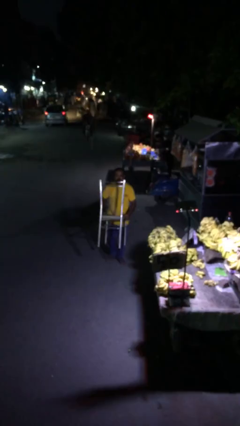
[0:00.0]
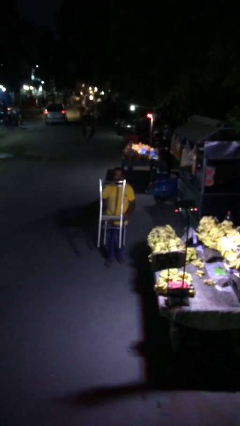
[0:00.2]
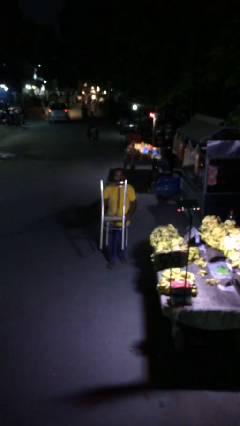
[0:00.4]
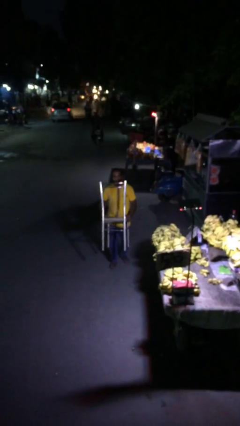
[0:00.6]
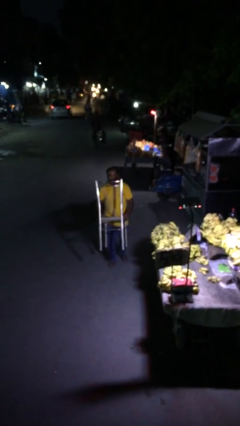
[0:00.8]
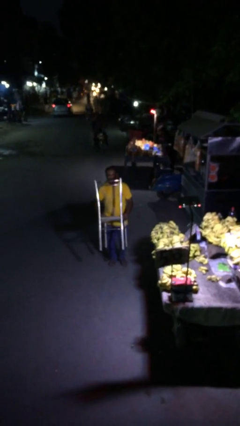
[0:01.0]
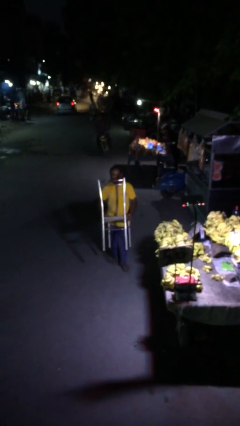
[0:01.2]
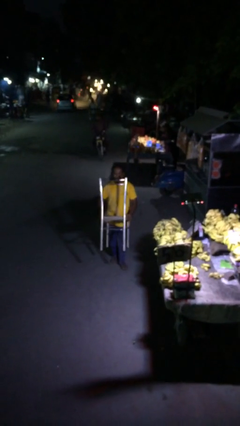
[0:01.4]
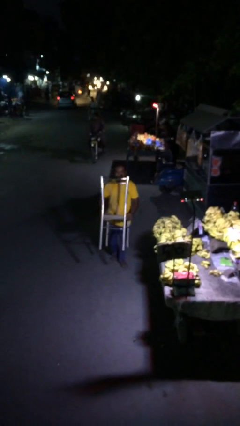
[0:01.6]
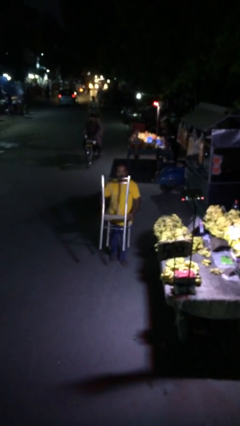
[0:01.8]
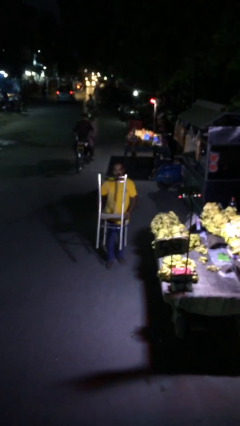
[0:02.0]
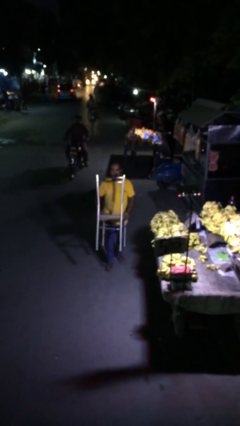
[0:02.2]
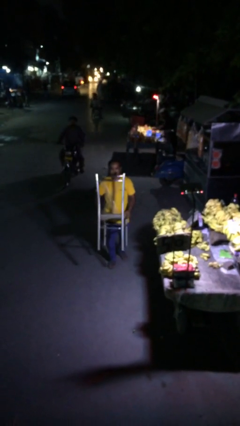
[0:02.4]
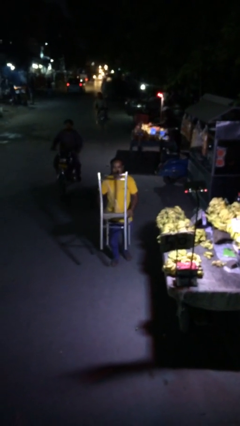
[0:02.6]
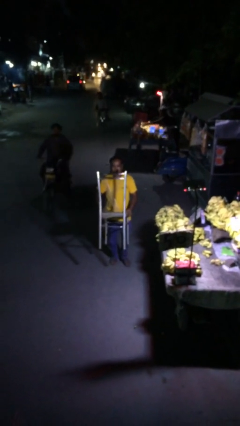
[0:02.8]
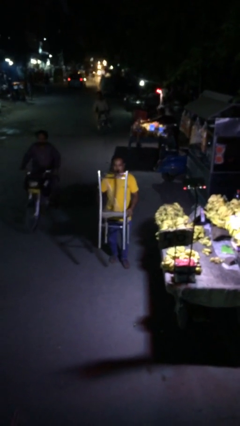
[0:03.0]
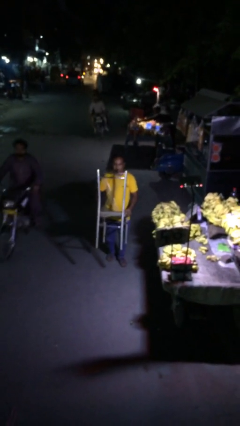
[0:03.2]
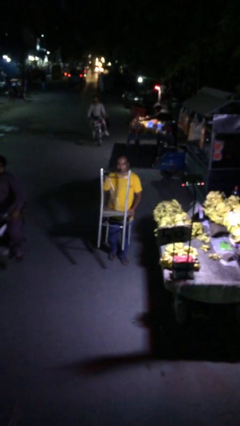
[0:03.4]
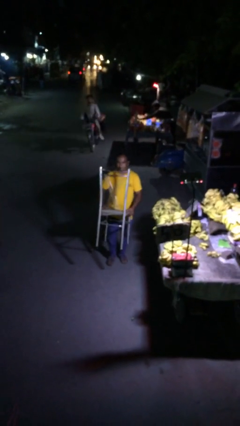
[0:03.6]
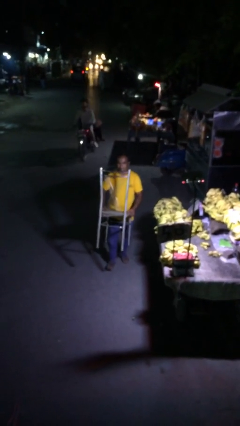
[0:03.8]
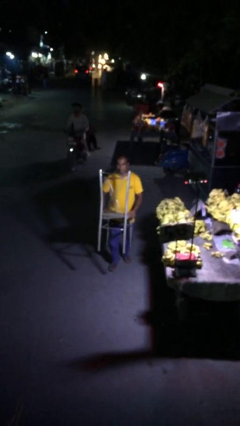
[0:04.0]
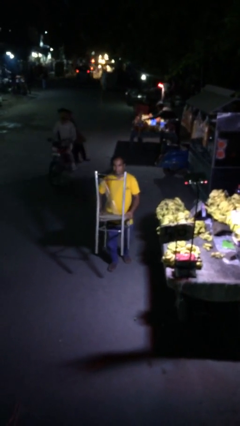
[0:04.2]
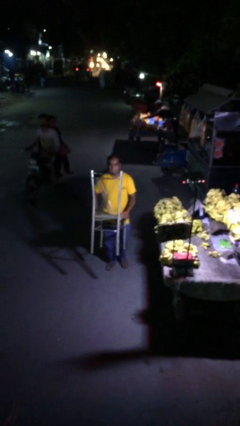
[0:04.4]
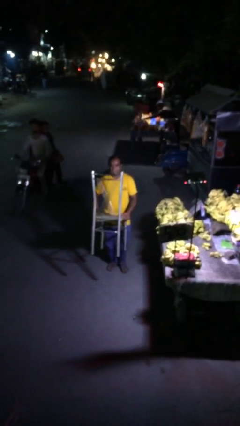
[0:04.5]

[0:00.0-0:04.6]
person carries heavy object

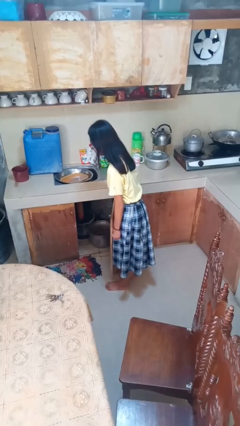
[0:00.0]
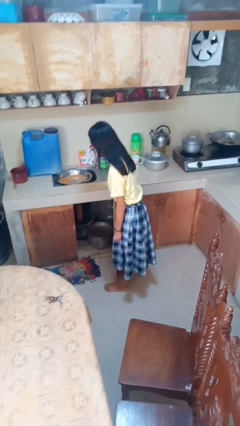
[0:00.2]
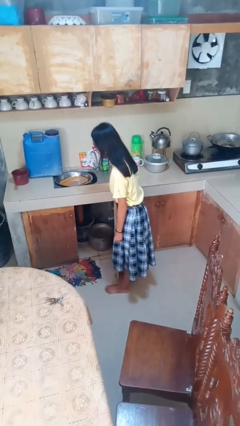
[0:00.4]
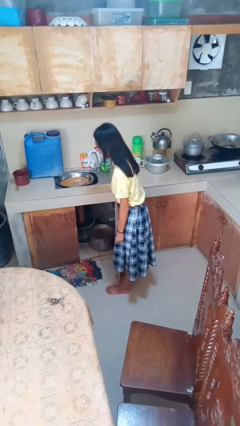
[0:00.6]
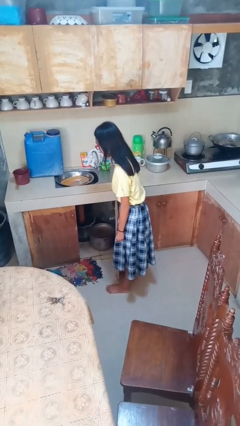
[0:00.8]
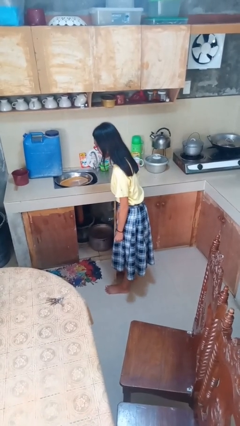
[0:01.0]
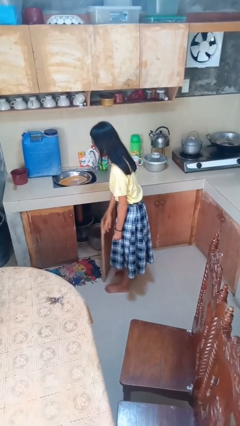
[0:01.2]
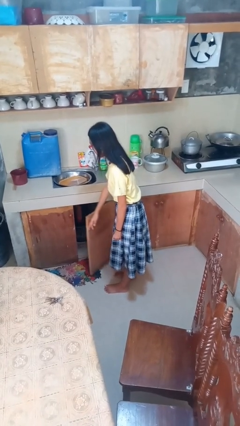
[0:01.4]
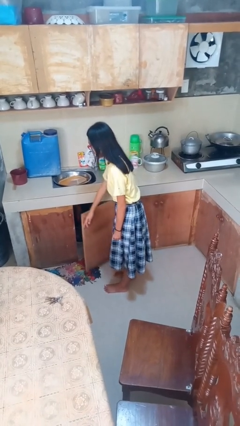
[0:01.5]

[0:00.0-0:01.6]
person opens cabinet

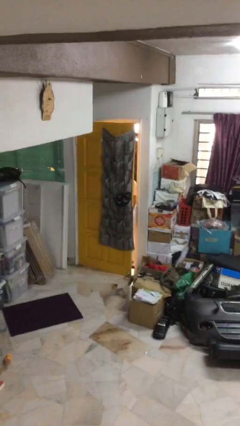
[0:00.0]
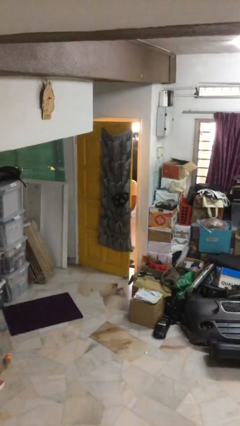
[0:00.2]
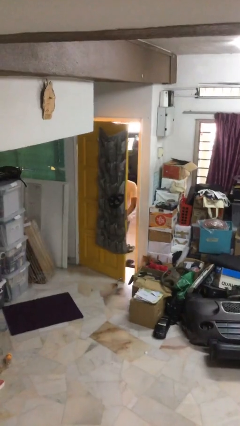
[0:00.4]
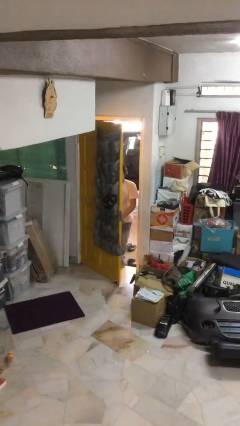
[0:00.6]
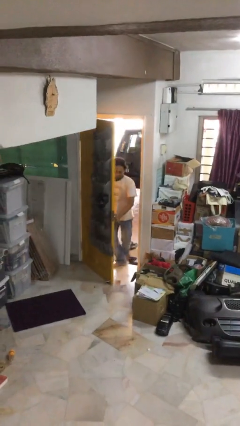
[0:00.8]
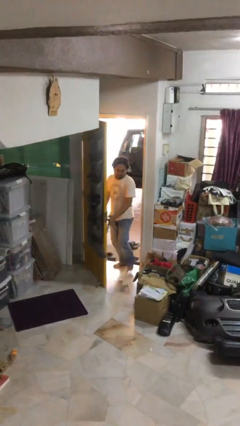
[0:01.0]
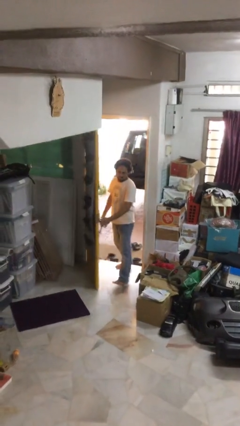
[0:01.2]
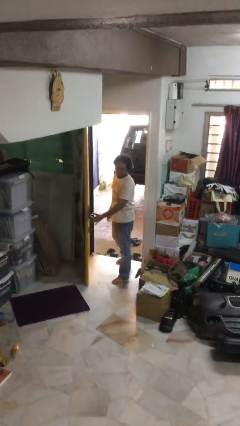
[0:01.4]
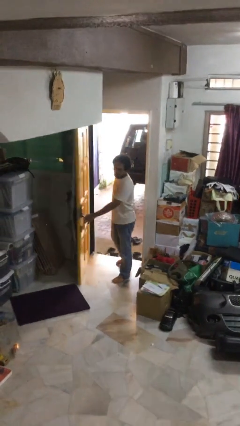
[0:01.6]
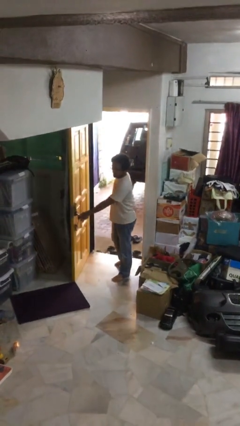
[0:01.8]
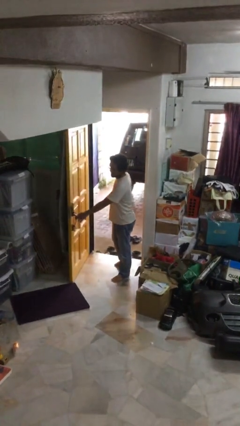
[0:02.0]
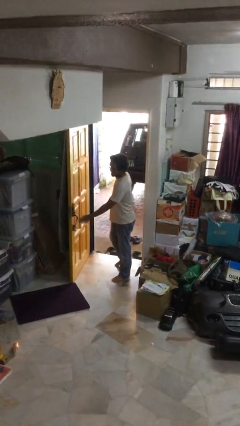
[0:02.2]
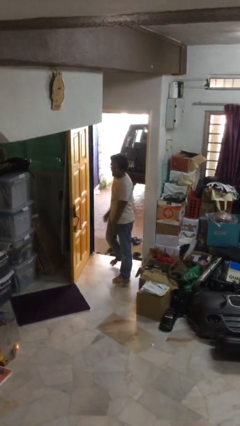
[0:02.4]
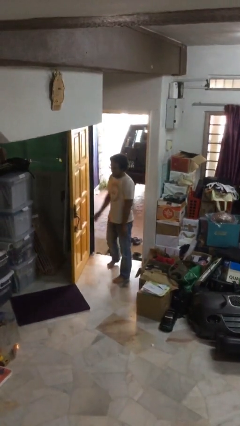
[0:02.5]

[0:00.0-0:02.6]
person opens facility door

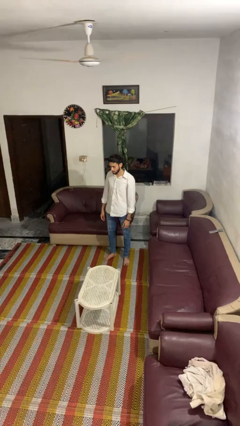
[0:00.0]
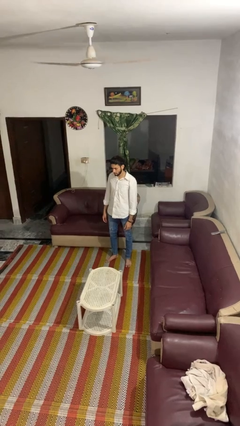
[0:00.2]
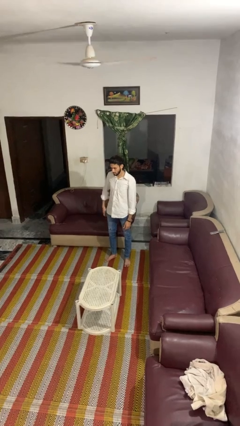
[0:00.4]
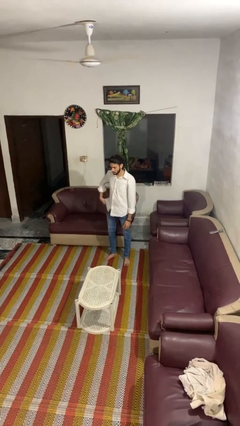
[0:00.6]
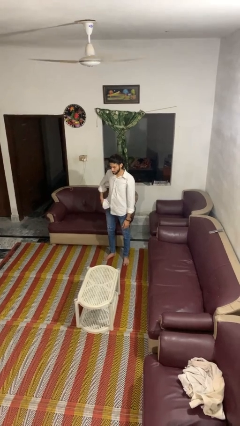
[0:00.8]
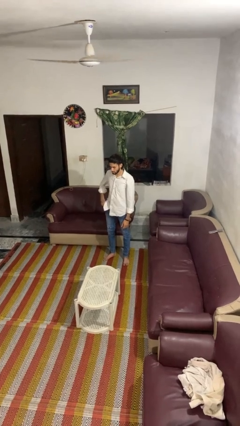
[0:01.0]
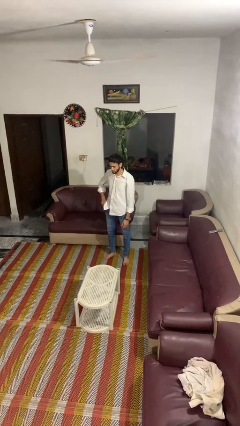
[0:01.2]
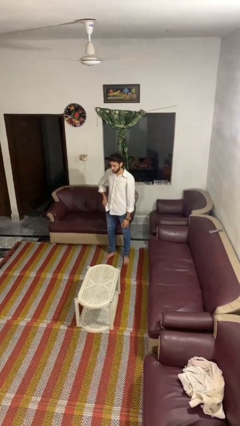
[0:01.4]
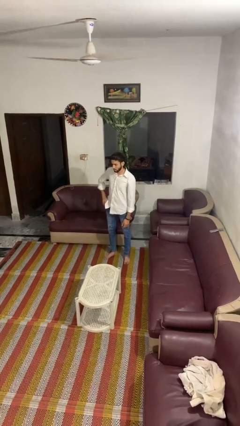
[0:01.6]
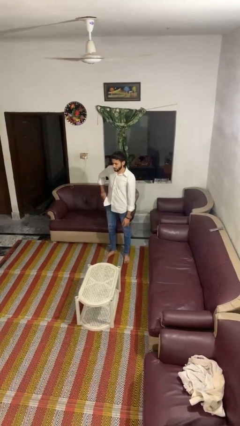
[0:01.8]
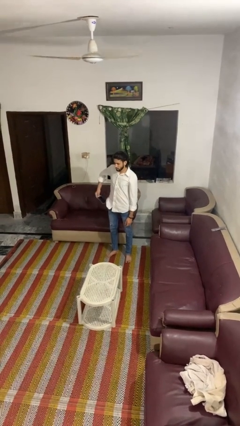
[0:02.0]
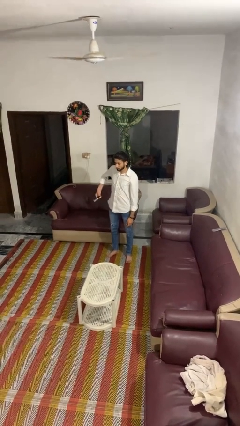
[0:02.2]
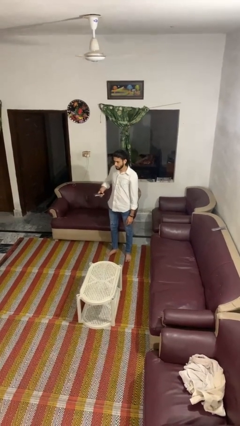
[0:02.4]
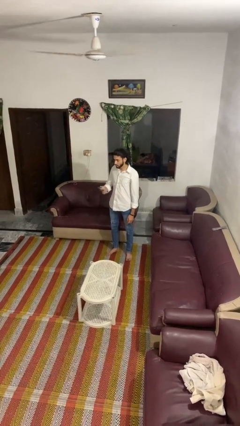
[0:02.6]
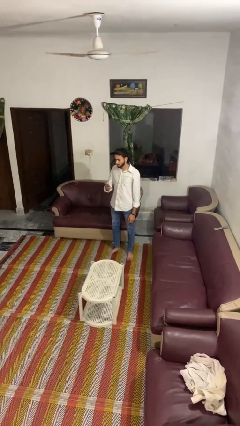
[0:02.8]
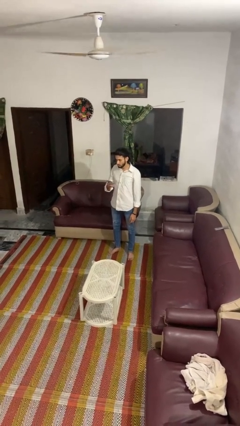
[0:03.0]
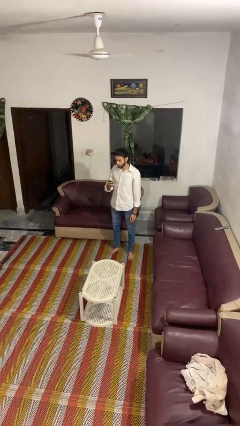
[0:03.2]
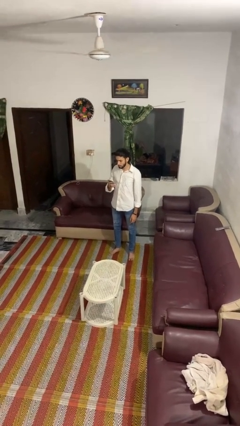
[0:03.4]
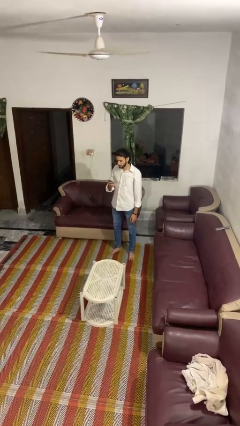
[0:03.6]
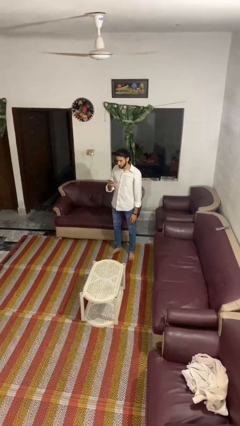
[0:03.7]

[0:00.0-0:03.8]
person takes phone from pocket

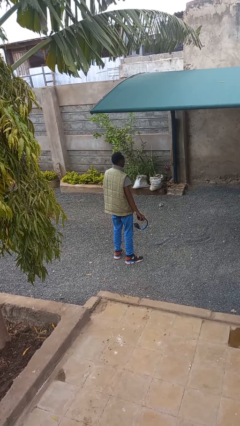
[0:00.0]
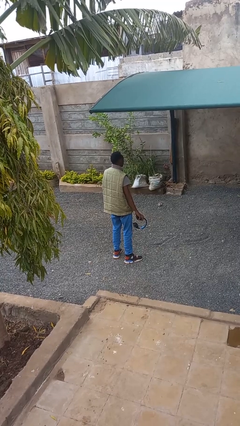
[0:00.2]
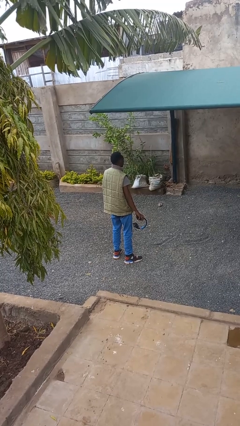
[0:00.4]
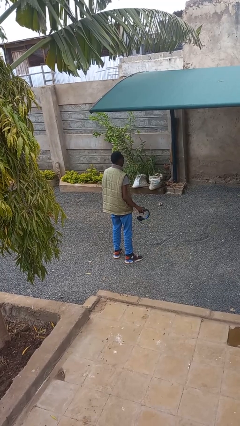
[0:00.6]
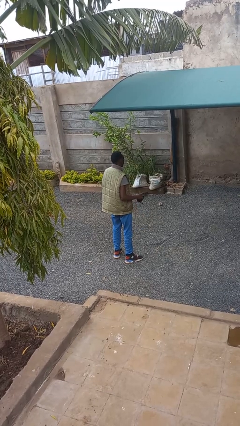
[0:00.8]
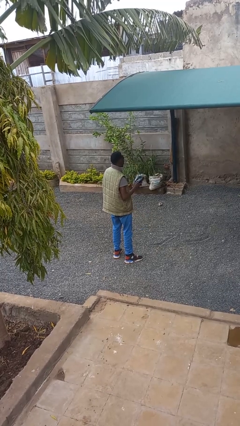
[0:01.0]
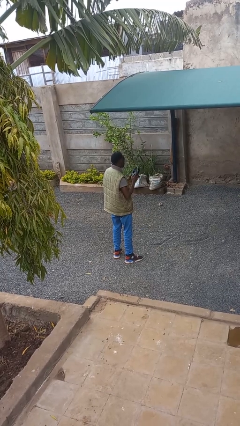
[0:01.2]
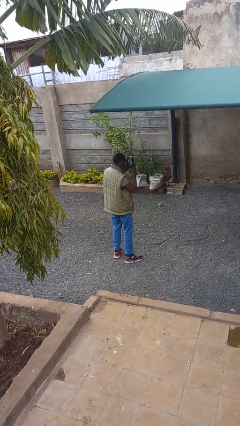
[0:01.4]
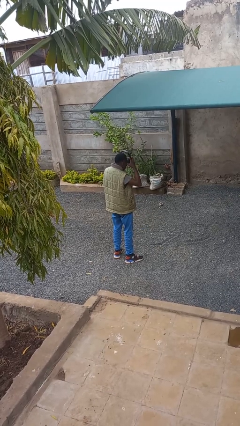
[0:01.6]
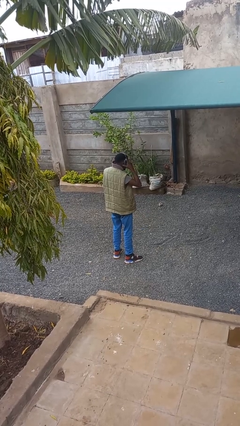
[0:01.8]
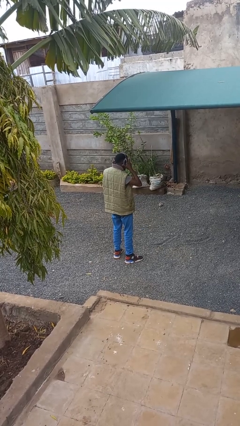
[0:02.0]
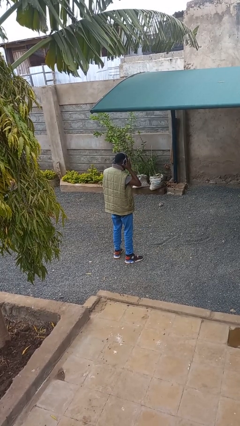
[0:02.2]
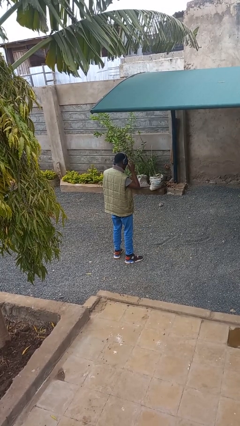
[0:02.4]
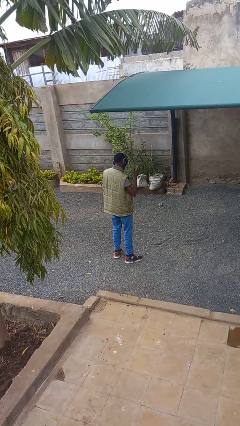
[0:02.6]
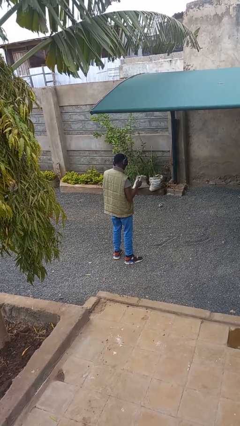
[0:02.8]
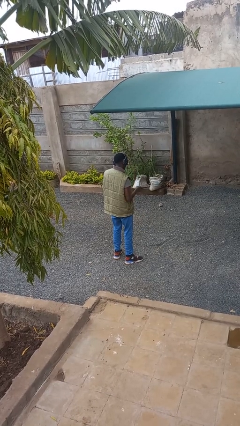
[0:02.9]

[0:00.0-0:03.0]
person puts on headphones

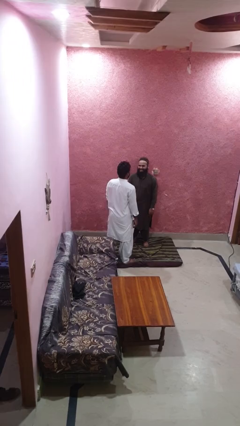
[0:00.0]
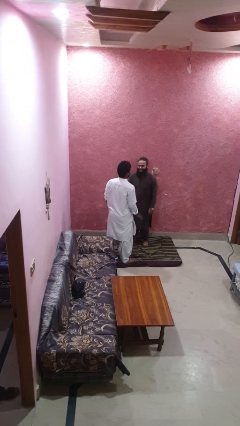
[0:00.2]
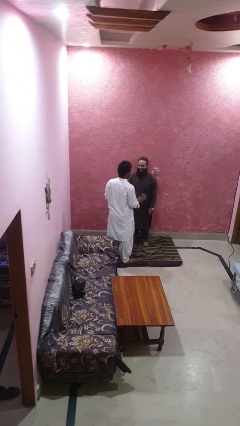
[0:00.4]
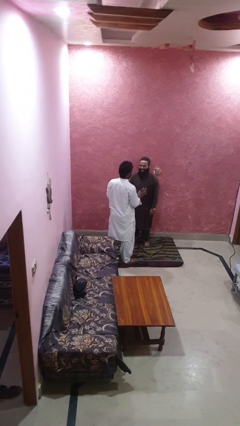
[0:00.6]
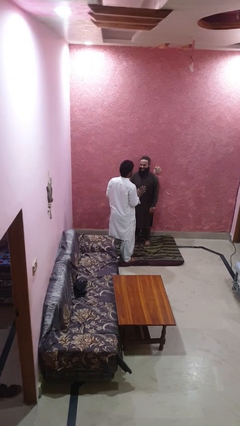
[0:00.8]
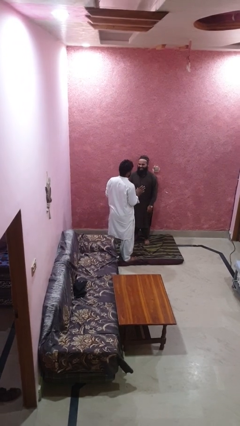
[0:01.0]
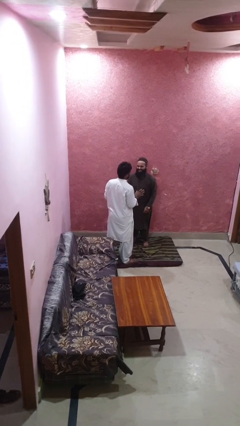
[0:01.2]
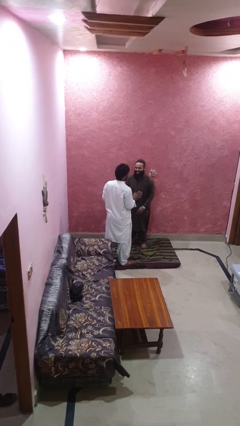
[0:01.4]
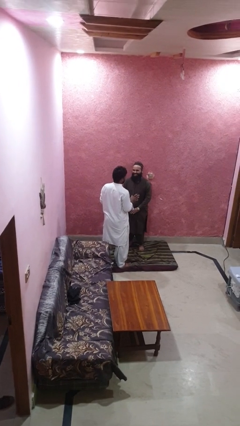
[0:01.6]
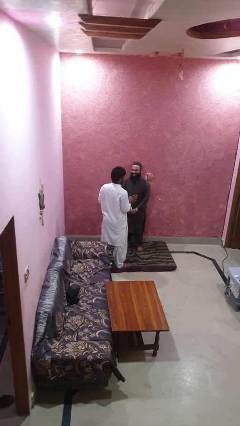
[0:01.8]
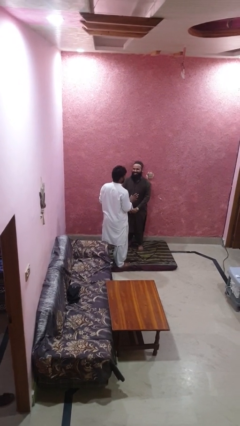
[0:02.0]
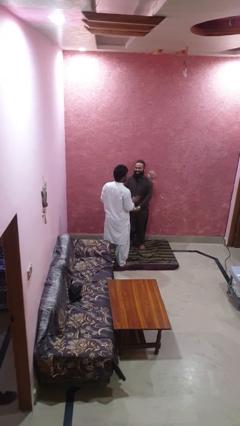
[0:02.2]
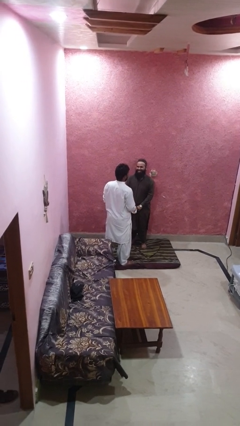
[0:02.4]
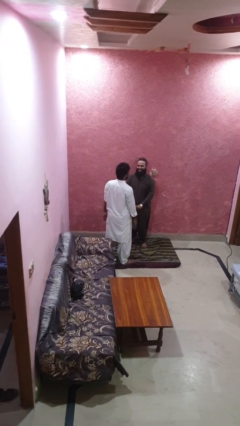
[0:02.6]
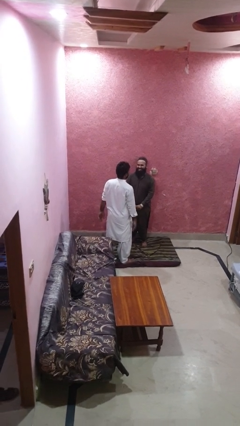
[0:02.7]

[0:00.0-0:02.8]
person laughs with person
